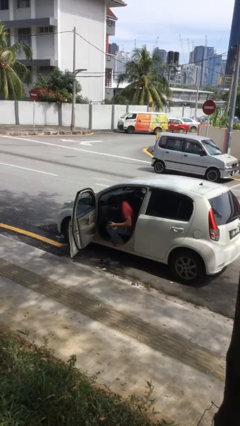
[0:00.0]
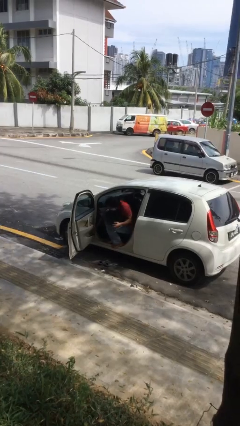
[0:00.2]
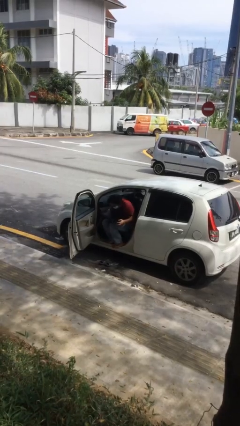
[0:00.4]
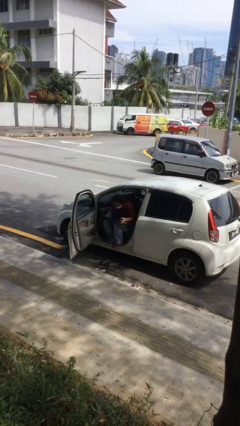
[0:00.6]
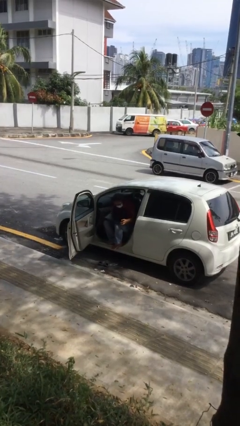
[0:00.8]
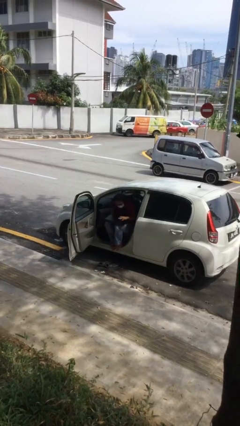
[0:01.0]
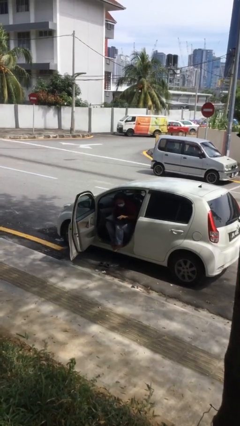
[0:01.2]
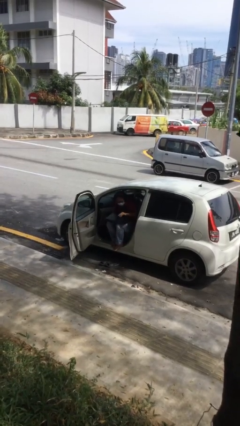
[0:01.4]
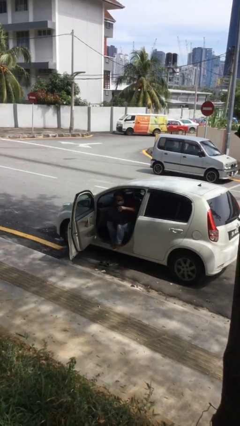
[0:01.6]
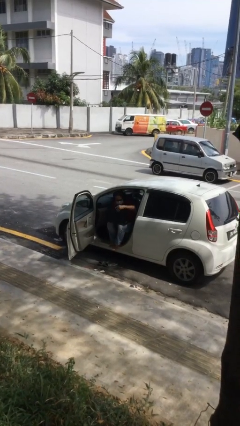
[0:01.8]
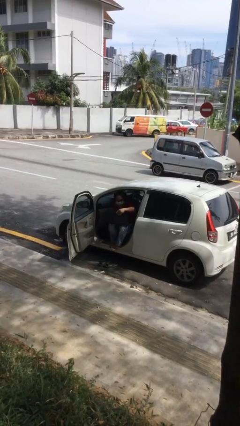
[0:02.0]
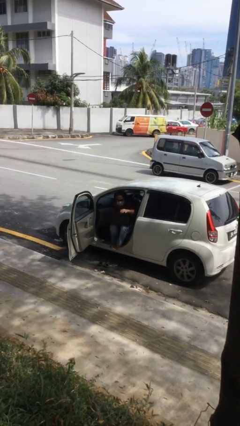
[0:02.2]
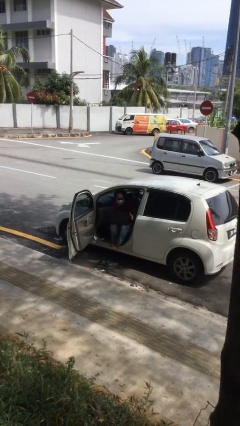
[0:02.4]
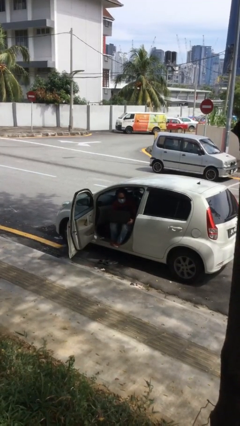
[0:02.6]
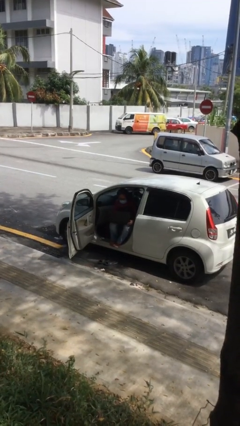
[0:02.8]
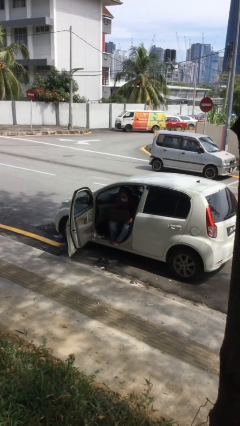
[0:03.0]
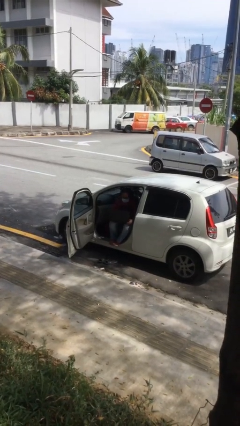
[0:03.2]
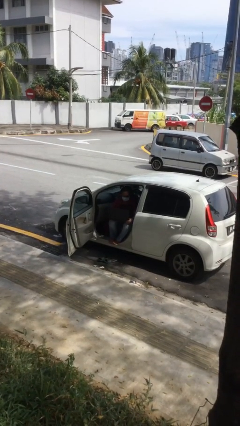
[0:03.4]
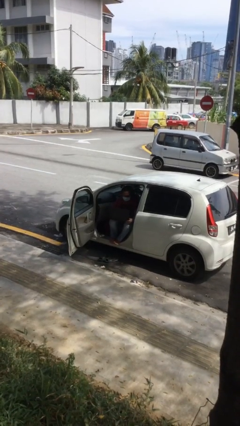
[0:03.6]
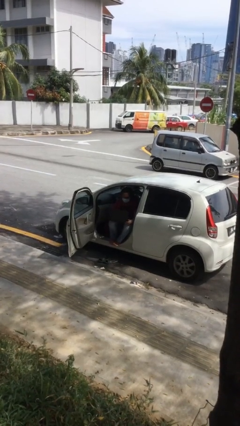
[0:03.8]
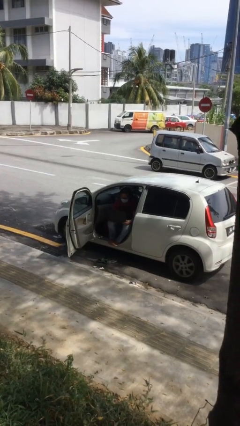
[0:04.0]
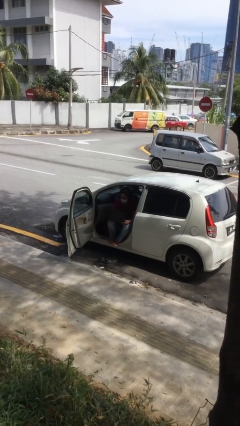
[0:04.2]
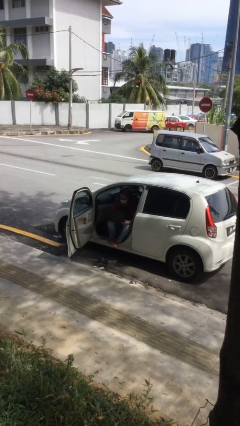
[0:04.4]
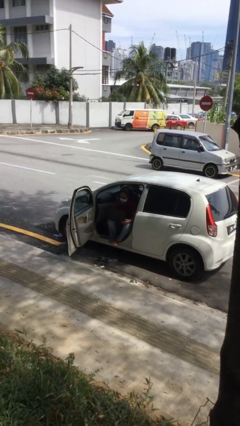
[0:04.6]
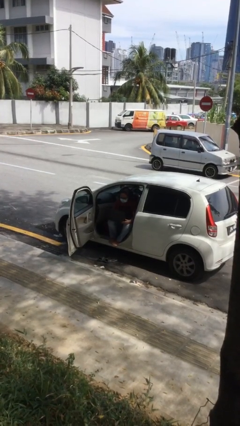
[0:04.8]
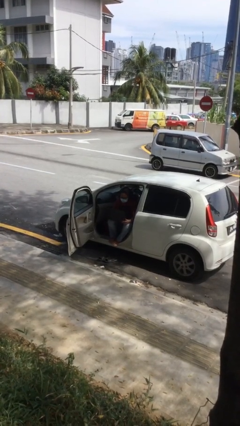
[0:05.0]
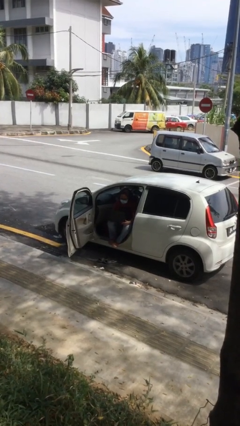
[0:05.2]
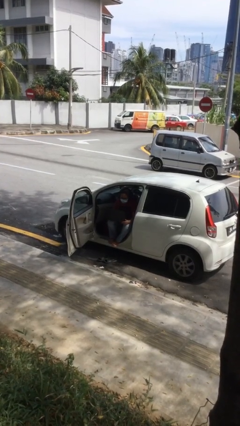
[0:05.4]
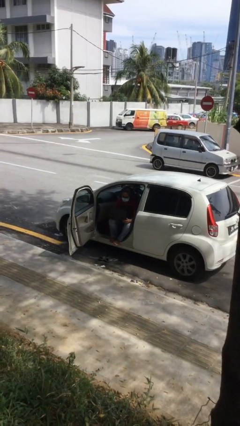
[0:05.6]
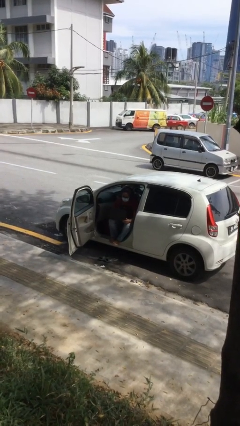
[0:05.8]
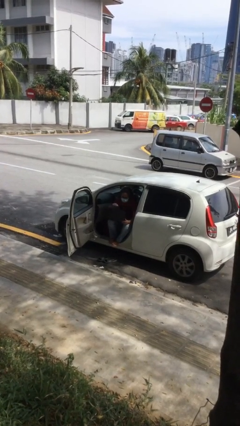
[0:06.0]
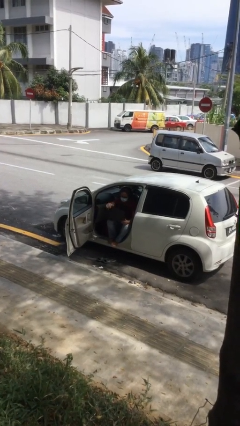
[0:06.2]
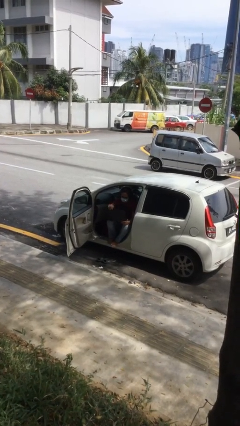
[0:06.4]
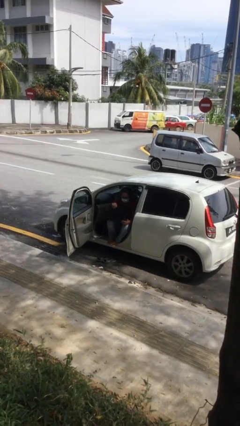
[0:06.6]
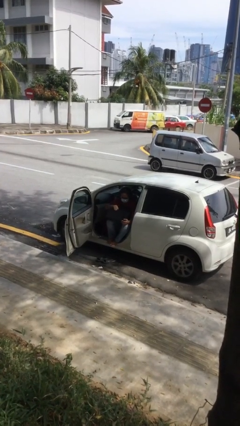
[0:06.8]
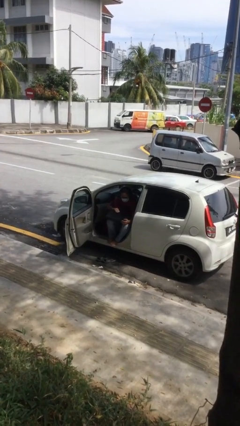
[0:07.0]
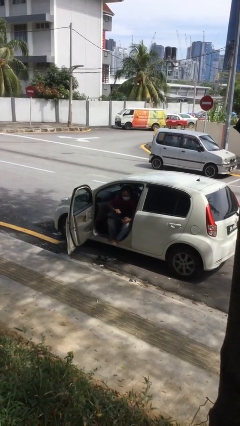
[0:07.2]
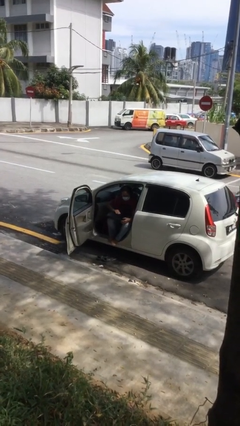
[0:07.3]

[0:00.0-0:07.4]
person interacts with laptop

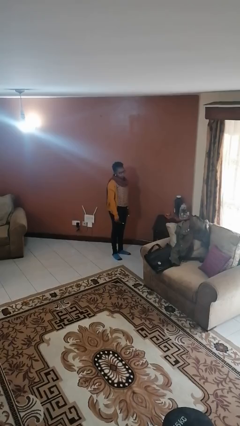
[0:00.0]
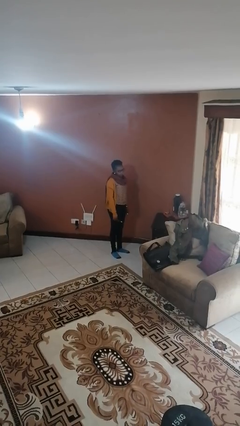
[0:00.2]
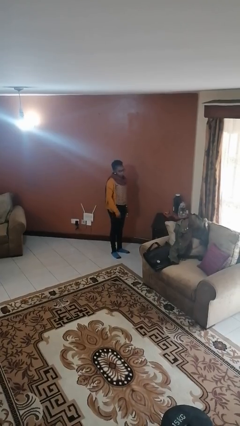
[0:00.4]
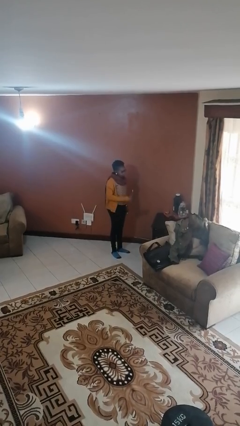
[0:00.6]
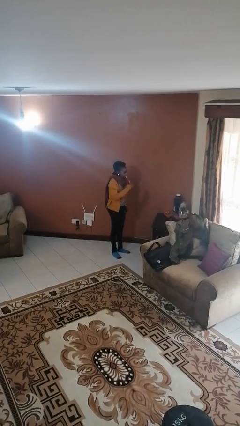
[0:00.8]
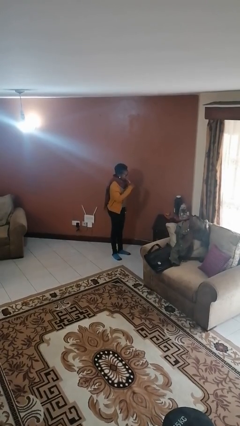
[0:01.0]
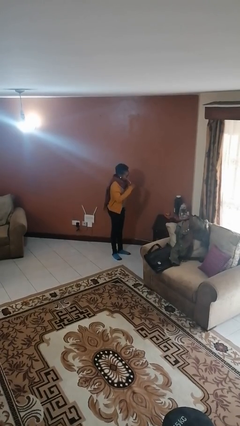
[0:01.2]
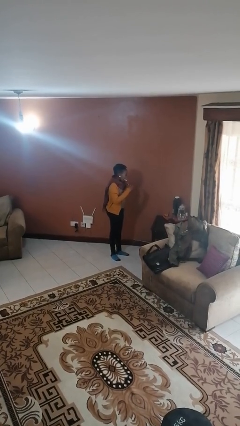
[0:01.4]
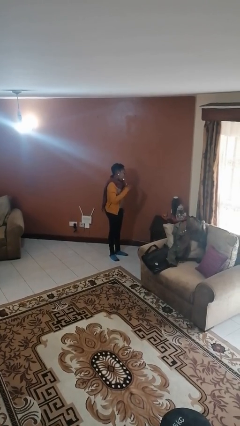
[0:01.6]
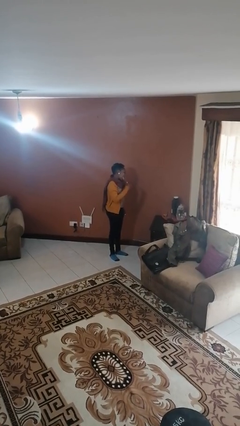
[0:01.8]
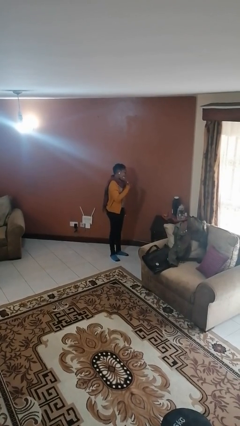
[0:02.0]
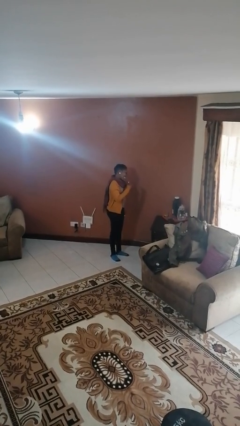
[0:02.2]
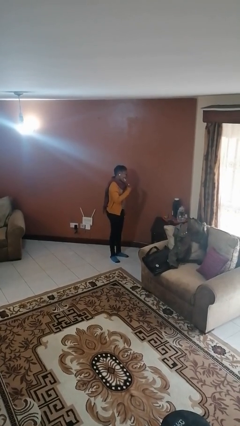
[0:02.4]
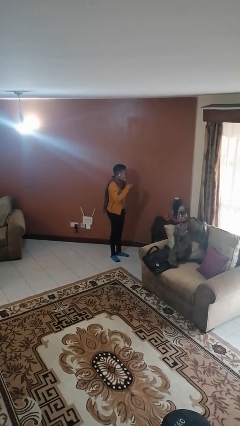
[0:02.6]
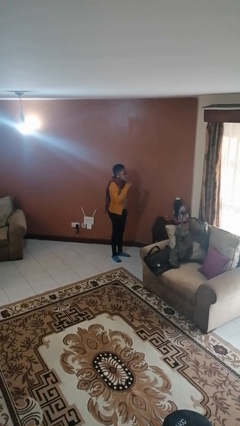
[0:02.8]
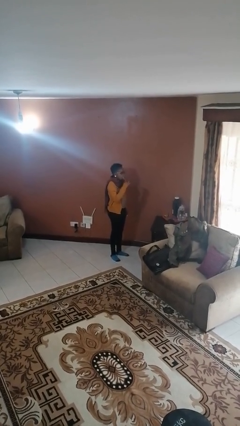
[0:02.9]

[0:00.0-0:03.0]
person brushes teeth

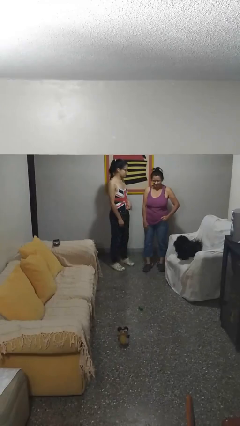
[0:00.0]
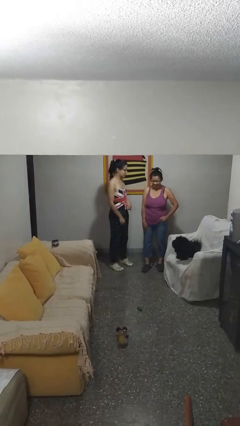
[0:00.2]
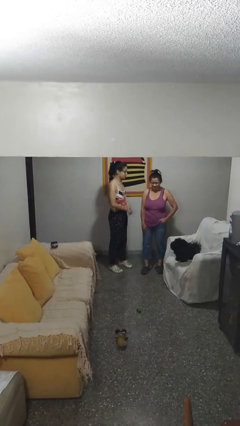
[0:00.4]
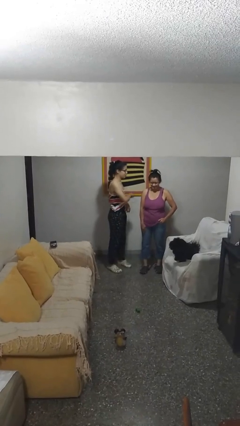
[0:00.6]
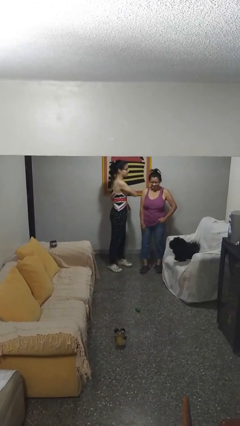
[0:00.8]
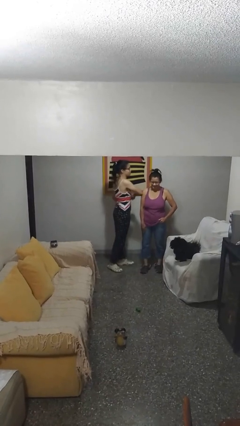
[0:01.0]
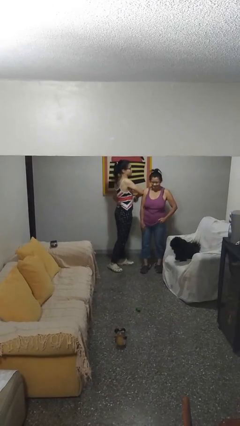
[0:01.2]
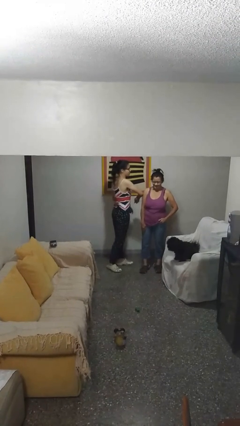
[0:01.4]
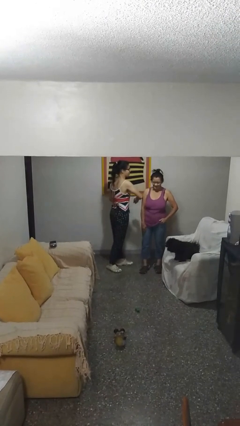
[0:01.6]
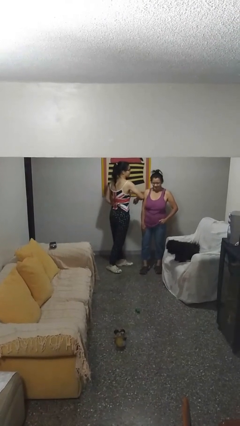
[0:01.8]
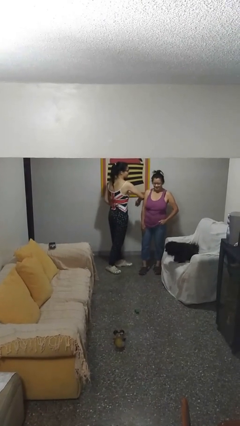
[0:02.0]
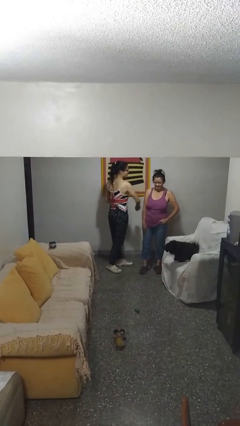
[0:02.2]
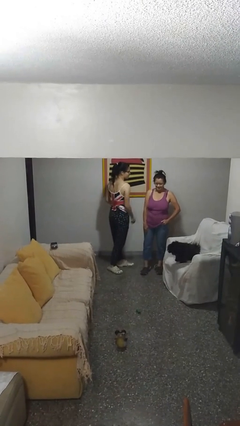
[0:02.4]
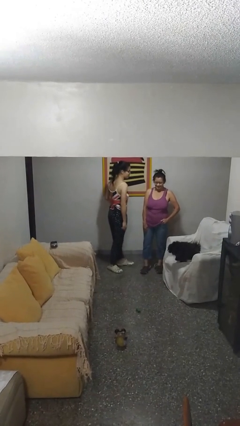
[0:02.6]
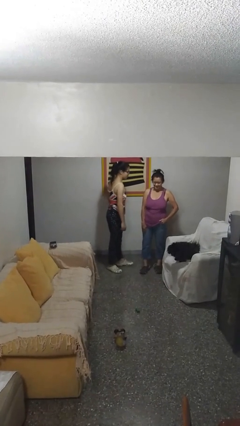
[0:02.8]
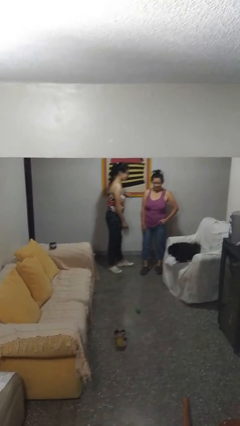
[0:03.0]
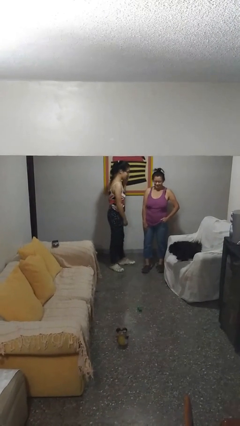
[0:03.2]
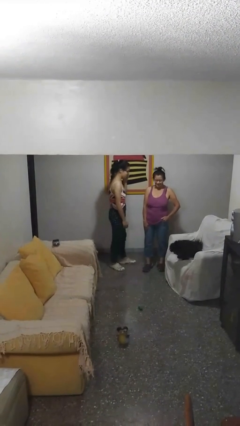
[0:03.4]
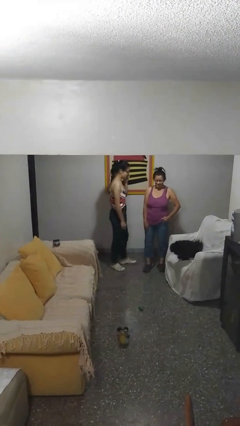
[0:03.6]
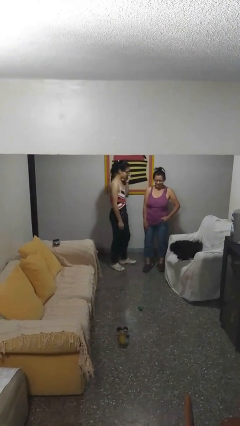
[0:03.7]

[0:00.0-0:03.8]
person nudges person with elbow

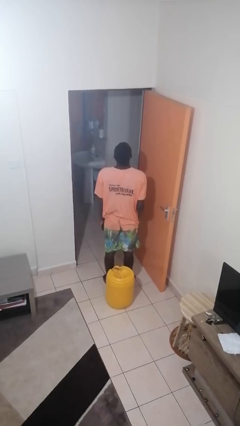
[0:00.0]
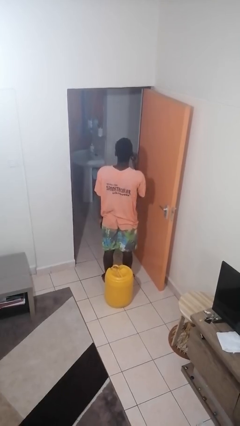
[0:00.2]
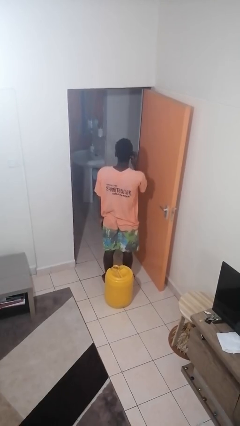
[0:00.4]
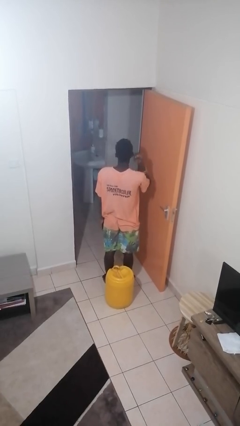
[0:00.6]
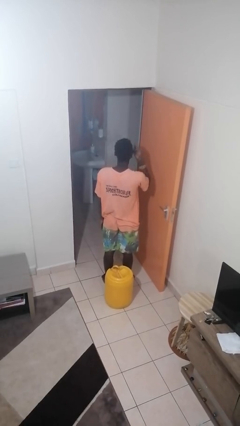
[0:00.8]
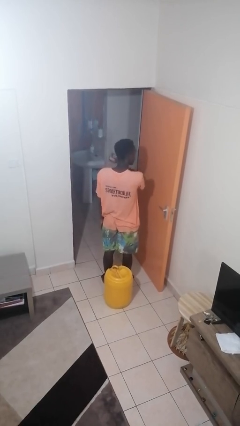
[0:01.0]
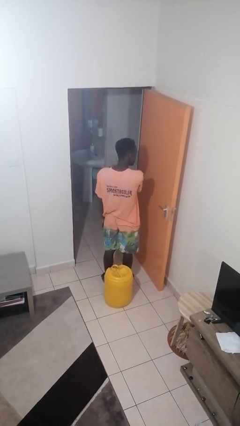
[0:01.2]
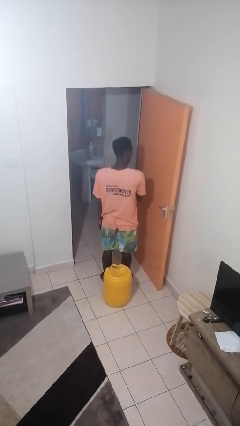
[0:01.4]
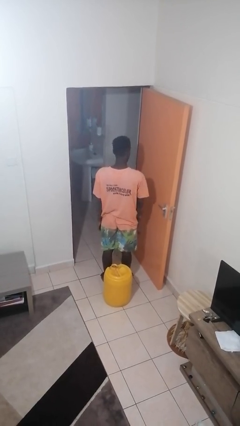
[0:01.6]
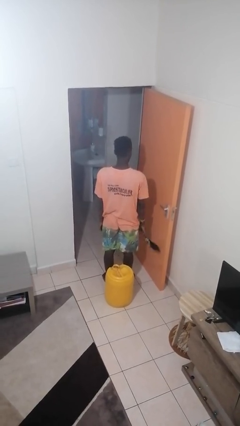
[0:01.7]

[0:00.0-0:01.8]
person takes off facemask

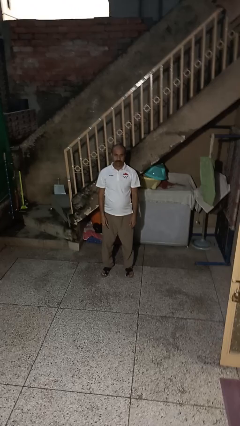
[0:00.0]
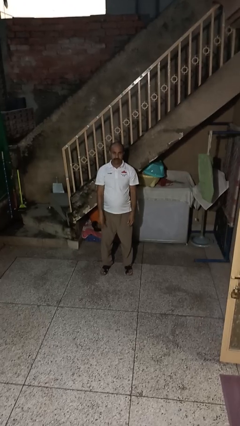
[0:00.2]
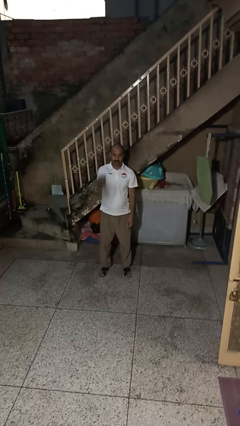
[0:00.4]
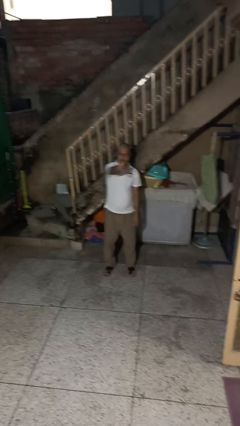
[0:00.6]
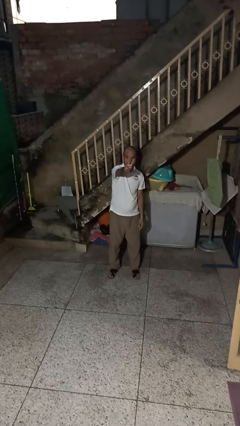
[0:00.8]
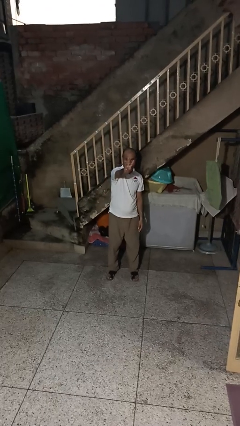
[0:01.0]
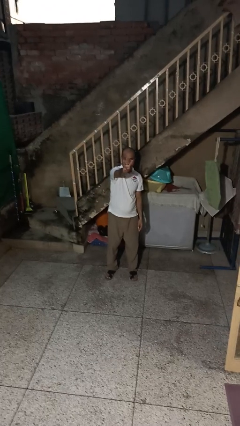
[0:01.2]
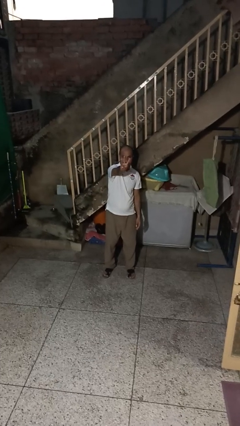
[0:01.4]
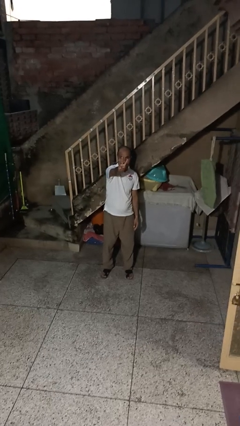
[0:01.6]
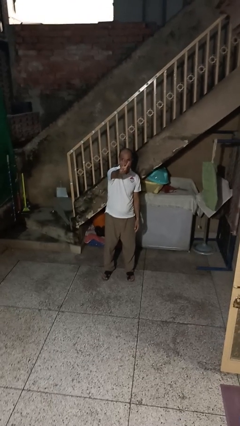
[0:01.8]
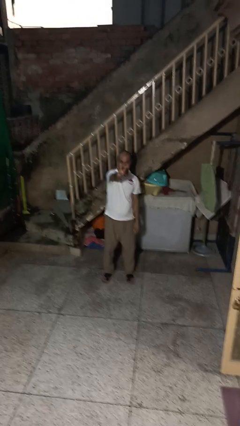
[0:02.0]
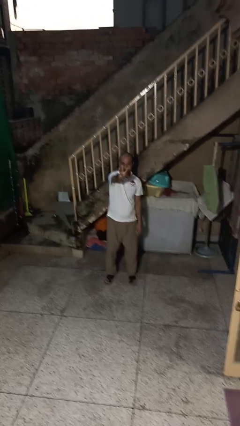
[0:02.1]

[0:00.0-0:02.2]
person gestures number three
